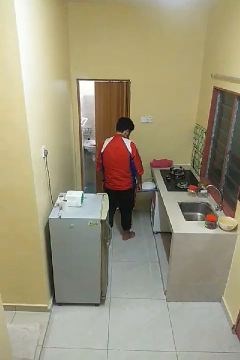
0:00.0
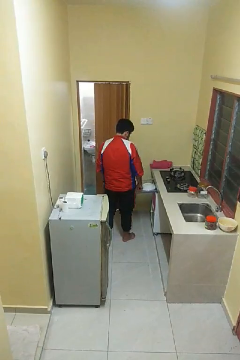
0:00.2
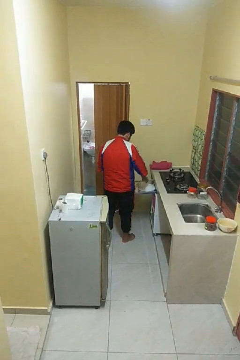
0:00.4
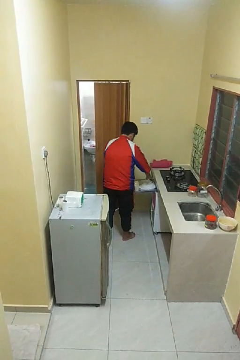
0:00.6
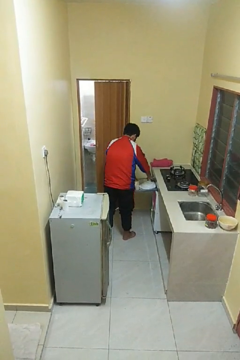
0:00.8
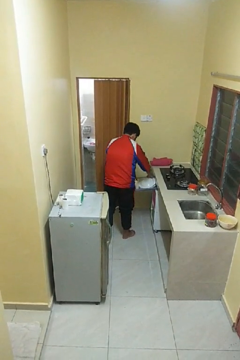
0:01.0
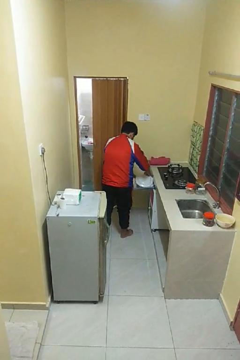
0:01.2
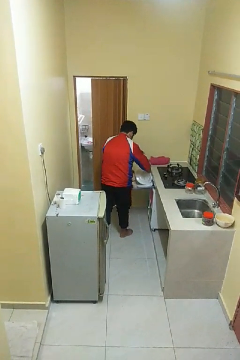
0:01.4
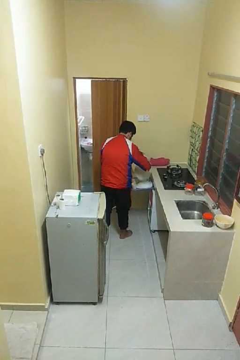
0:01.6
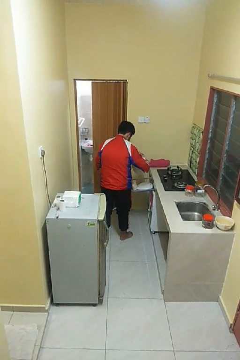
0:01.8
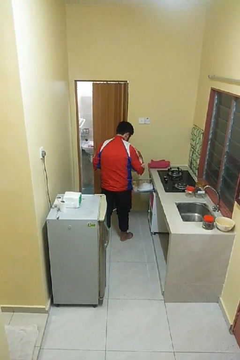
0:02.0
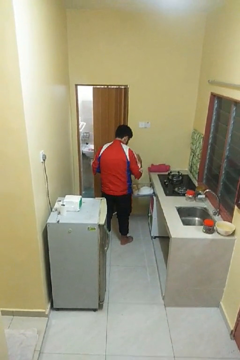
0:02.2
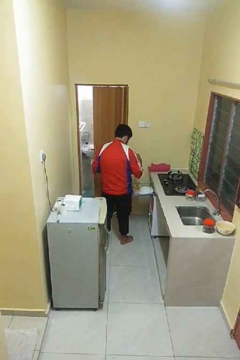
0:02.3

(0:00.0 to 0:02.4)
person takes object from kitchen drawer

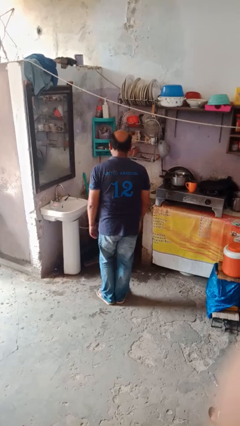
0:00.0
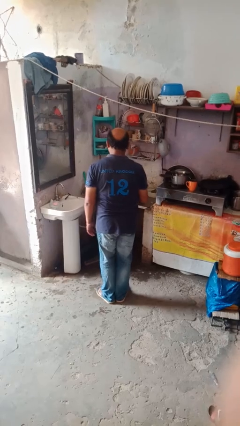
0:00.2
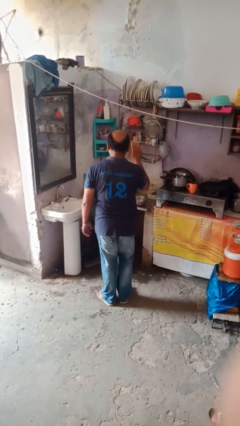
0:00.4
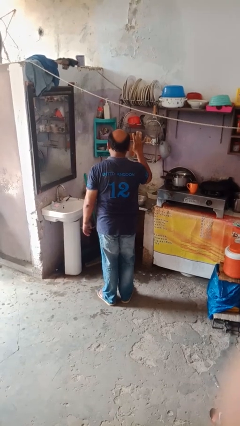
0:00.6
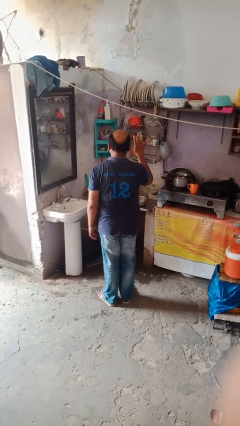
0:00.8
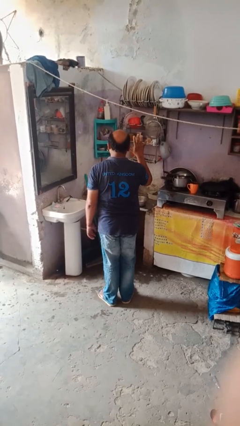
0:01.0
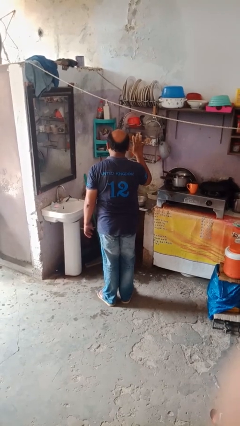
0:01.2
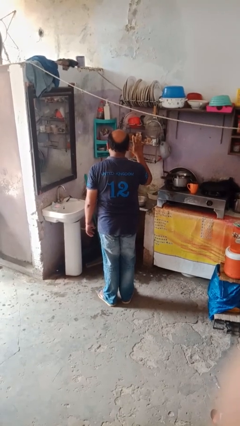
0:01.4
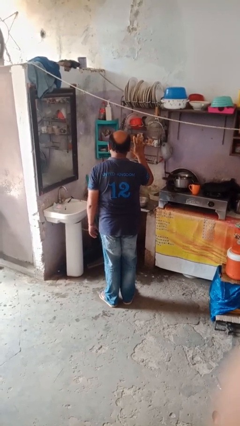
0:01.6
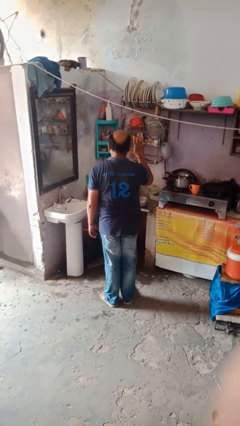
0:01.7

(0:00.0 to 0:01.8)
person gestures number five

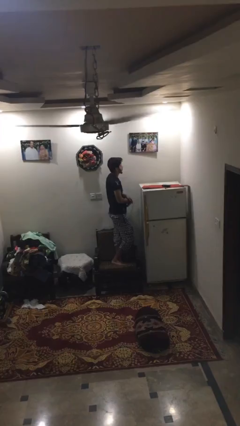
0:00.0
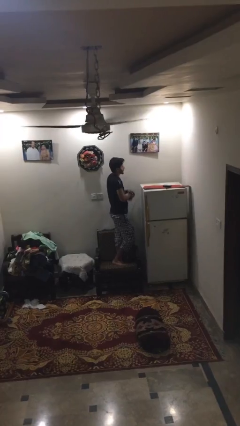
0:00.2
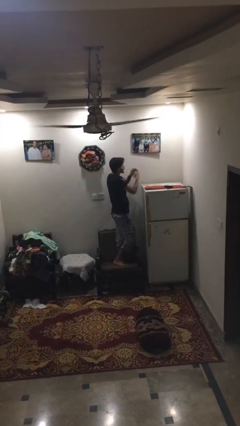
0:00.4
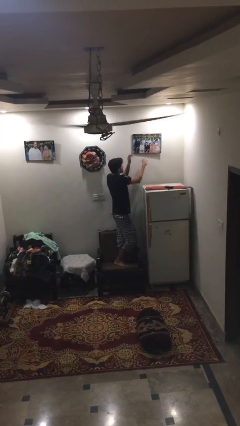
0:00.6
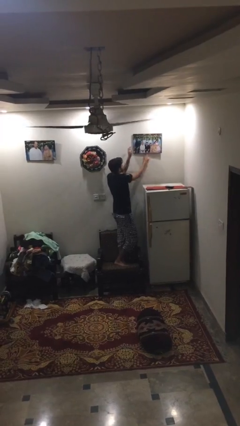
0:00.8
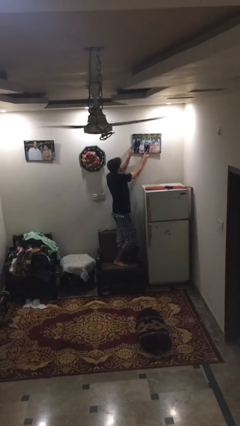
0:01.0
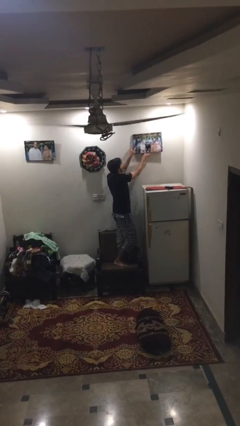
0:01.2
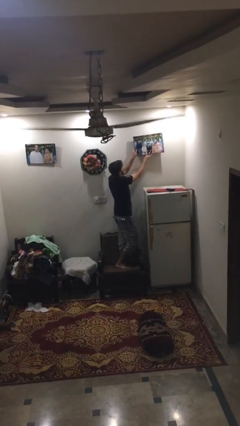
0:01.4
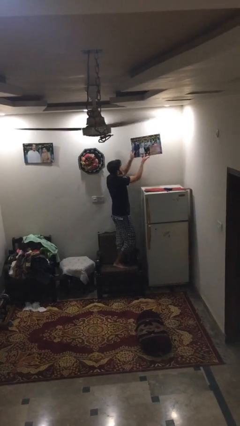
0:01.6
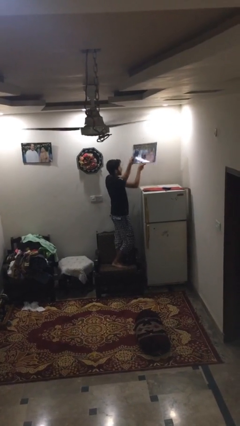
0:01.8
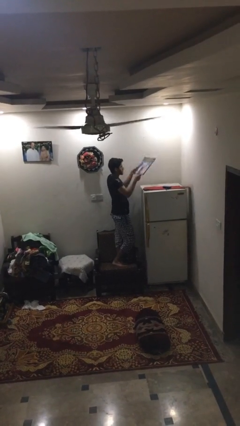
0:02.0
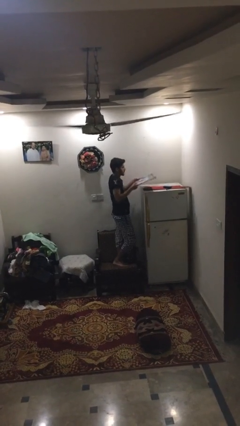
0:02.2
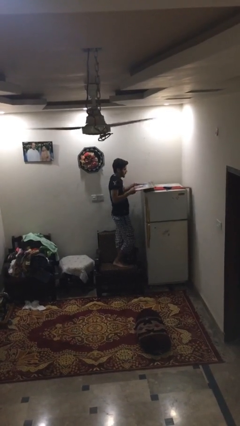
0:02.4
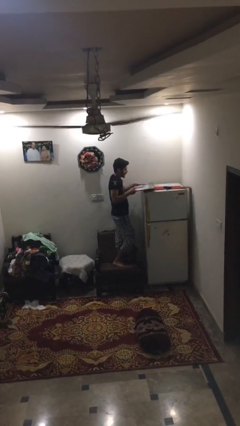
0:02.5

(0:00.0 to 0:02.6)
person takes down picture frame

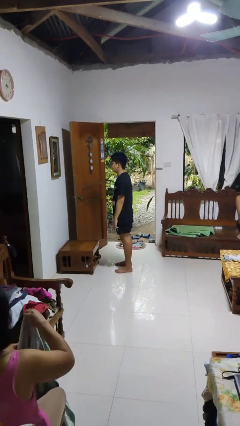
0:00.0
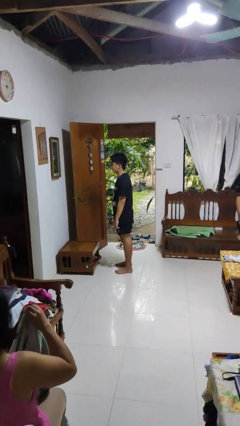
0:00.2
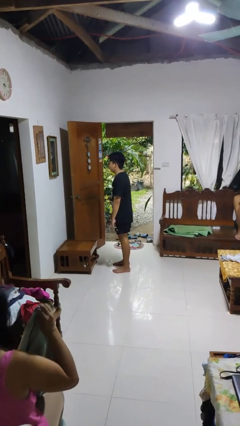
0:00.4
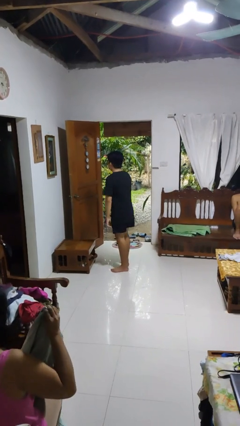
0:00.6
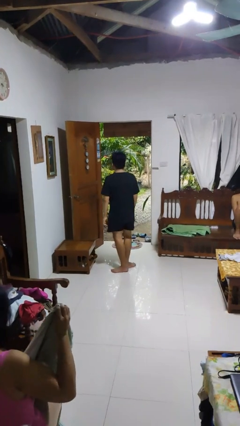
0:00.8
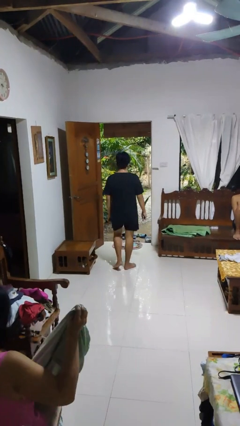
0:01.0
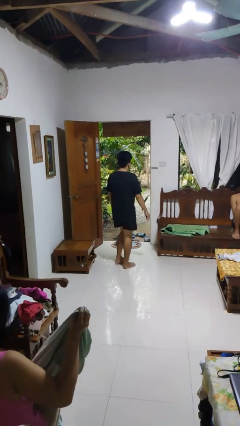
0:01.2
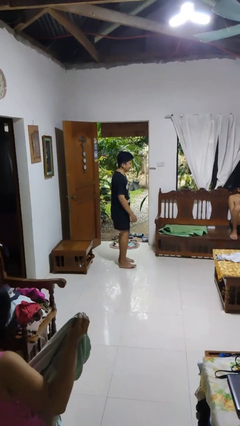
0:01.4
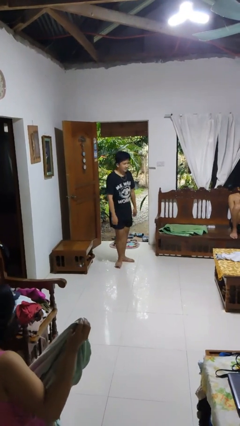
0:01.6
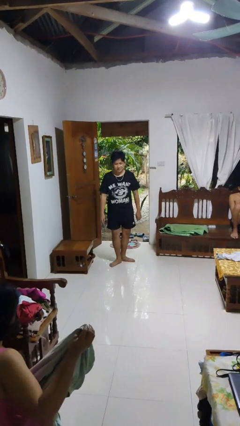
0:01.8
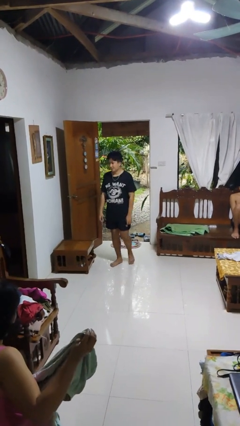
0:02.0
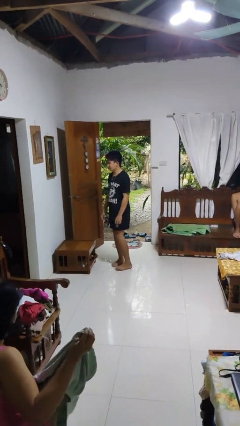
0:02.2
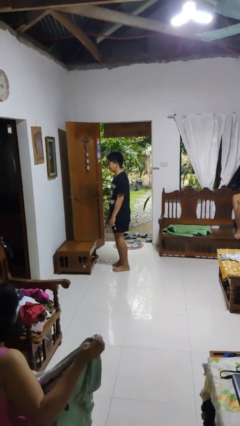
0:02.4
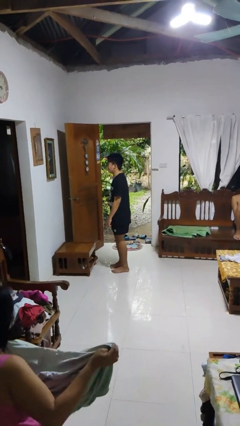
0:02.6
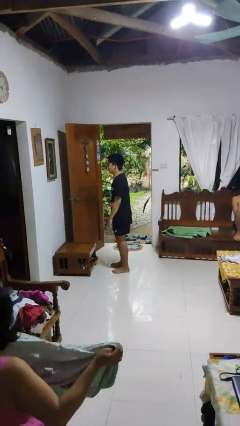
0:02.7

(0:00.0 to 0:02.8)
person twirls

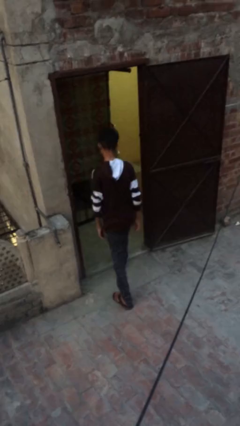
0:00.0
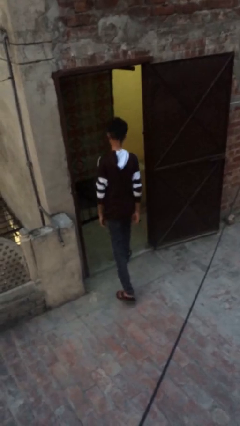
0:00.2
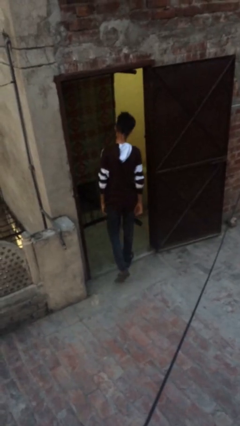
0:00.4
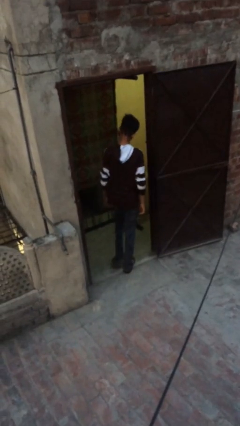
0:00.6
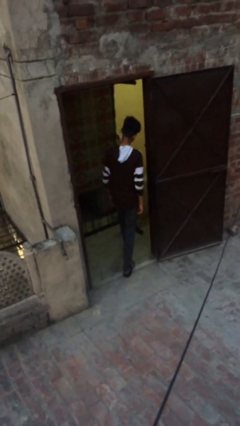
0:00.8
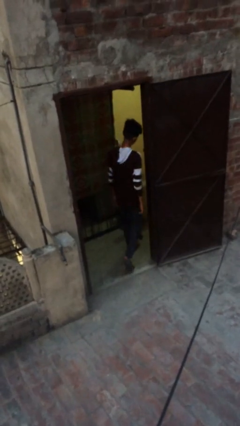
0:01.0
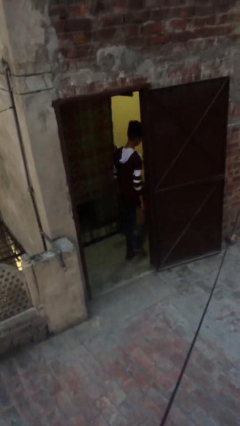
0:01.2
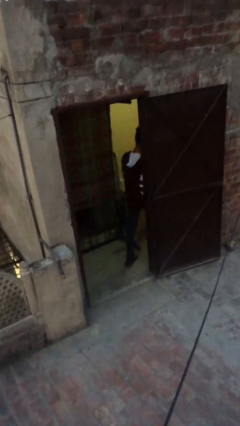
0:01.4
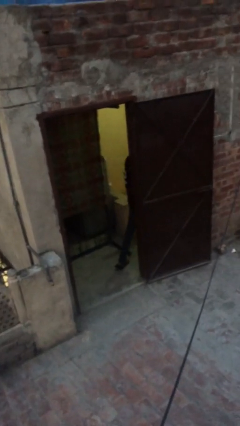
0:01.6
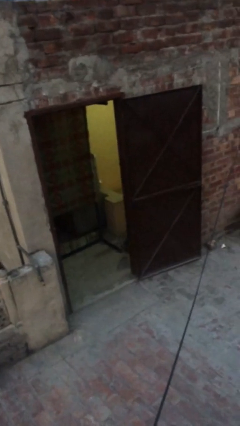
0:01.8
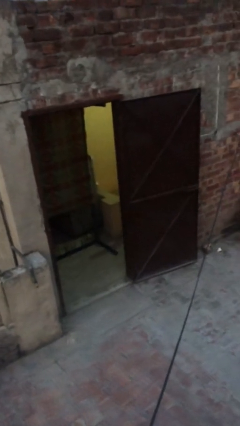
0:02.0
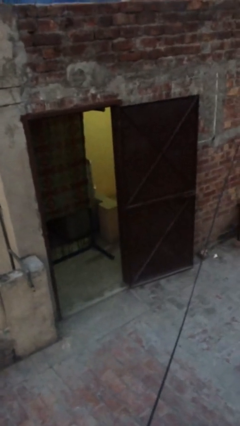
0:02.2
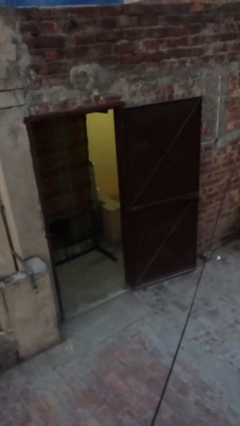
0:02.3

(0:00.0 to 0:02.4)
person exits scene through structure

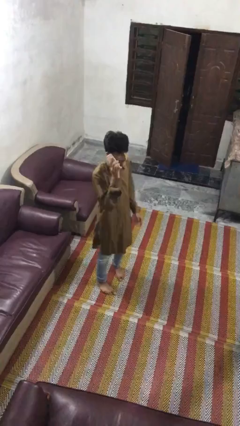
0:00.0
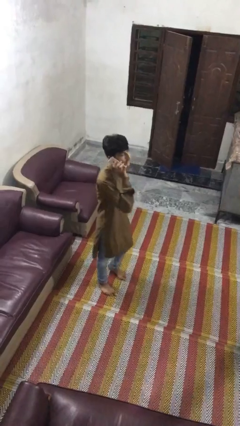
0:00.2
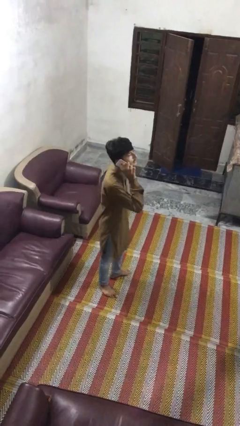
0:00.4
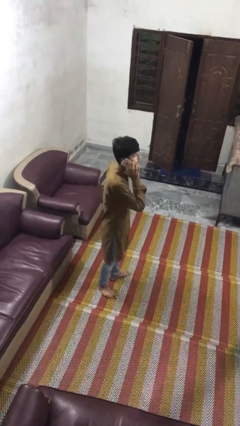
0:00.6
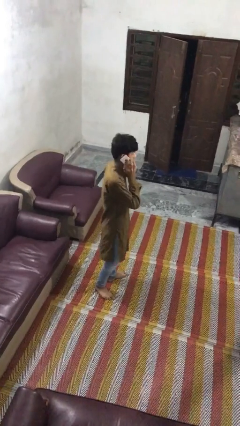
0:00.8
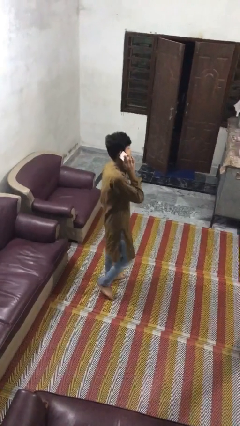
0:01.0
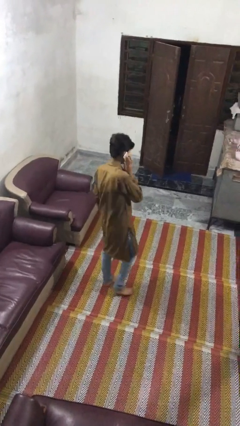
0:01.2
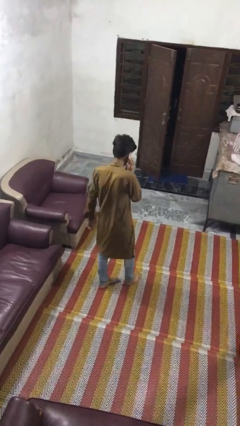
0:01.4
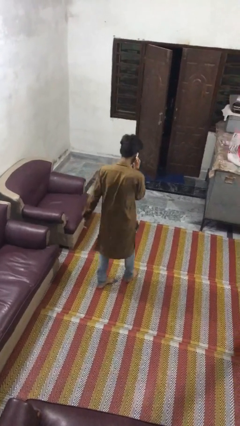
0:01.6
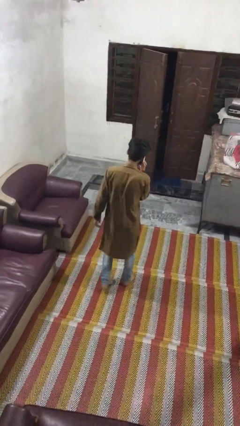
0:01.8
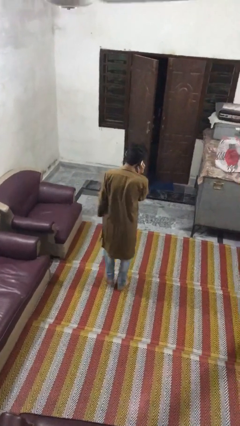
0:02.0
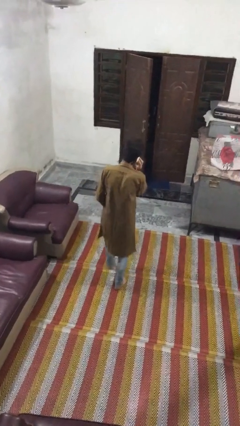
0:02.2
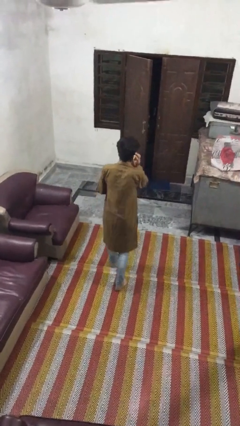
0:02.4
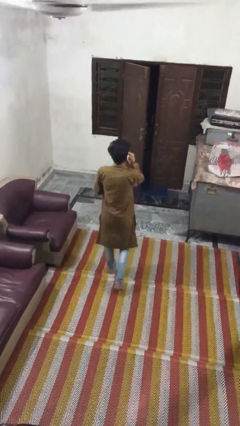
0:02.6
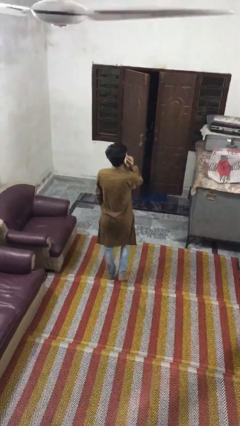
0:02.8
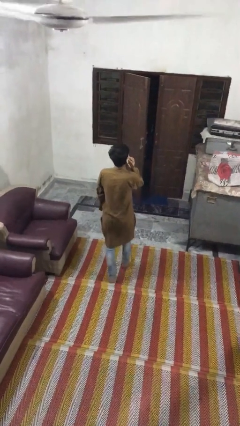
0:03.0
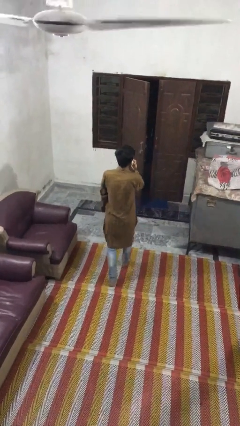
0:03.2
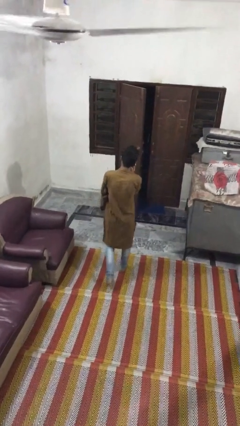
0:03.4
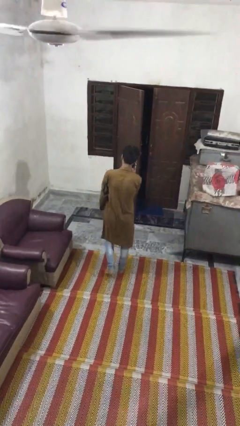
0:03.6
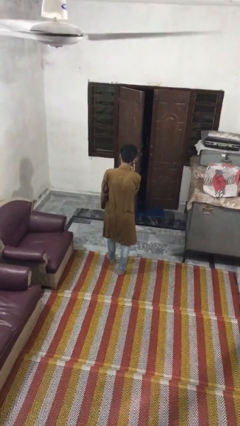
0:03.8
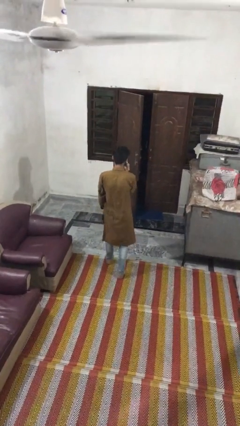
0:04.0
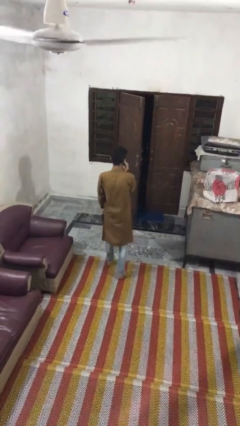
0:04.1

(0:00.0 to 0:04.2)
person talks on phone

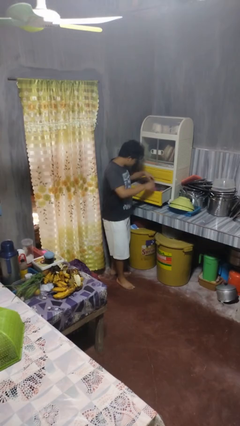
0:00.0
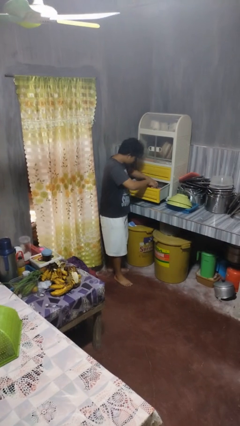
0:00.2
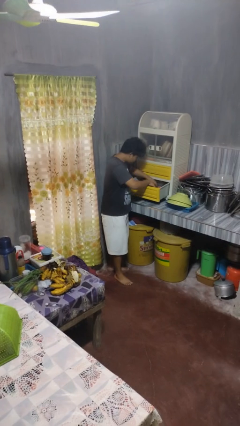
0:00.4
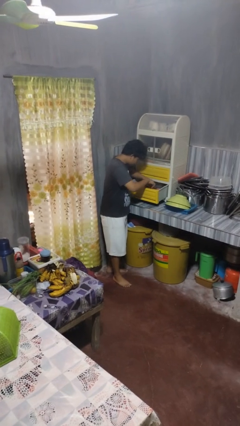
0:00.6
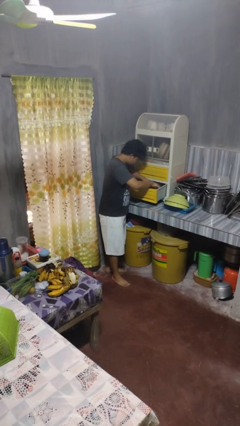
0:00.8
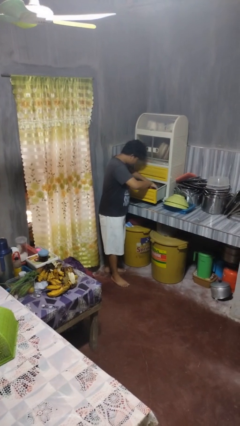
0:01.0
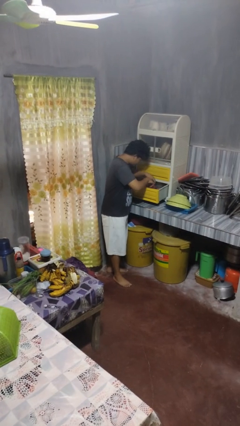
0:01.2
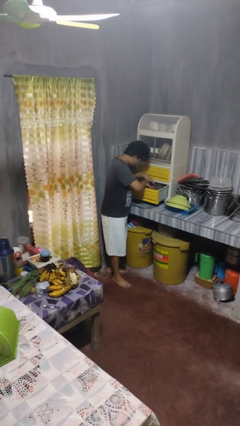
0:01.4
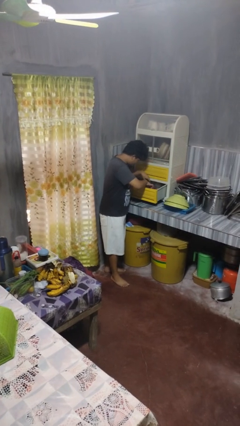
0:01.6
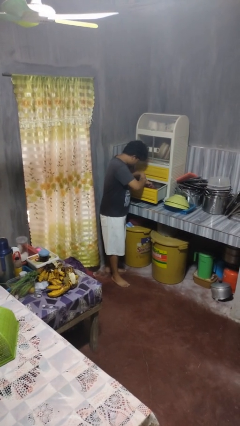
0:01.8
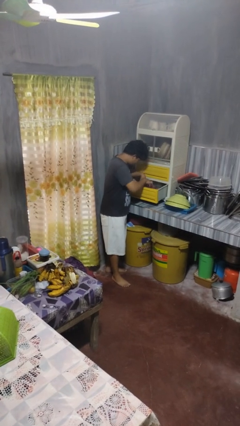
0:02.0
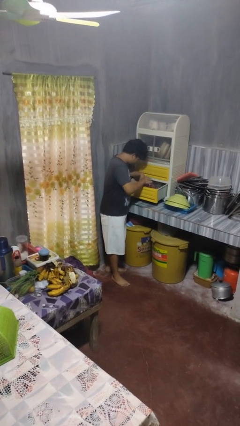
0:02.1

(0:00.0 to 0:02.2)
person searches in kitchen drawer
